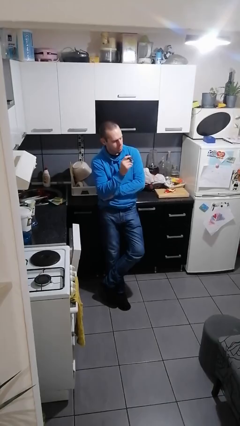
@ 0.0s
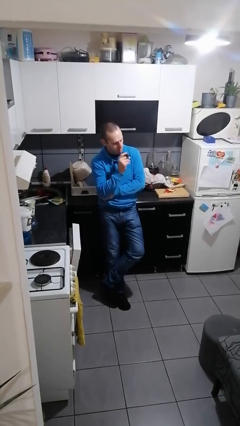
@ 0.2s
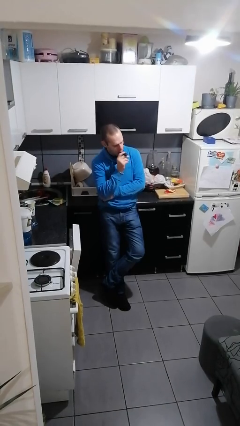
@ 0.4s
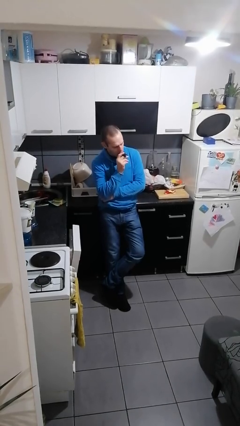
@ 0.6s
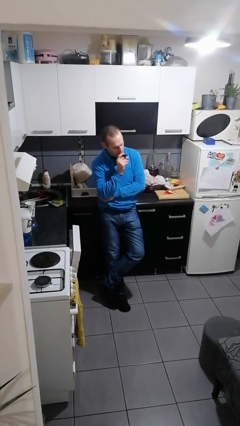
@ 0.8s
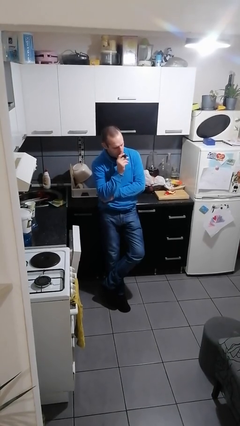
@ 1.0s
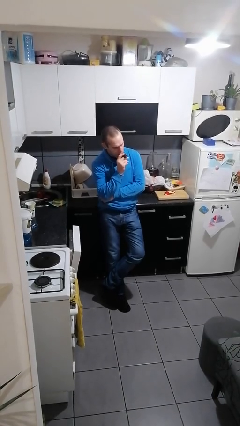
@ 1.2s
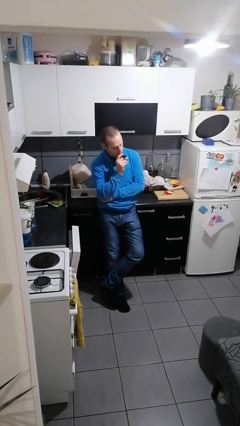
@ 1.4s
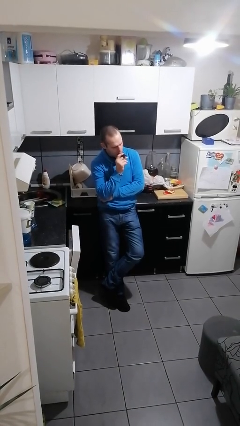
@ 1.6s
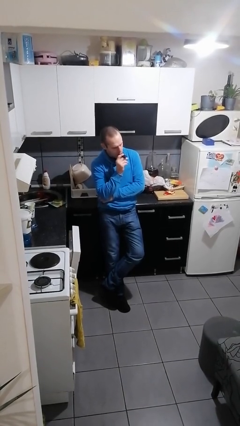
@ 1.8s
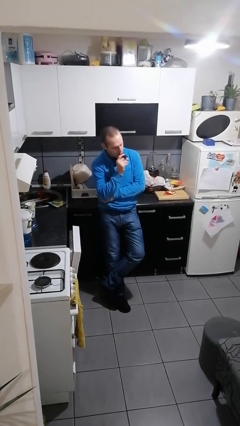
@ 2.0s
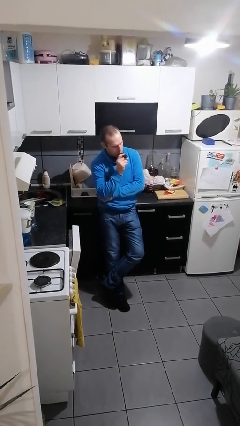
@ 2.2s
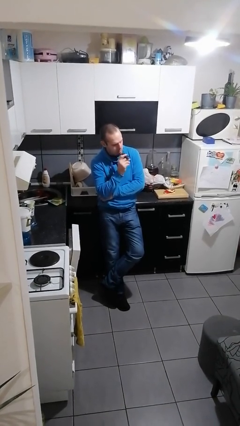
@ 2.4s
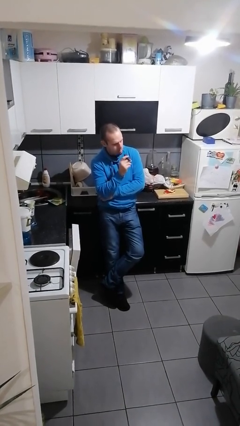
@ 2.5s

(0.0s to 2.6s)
person vapes

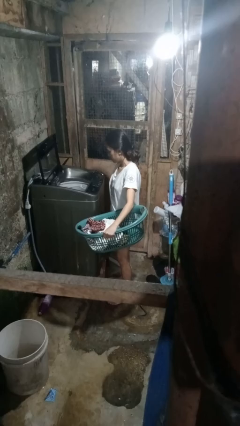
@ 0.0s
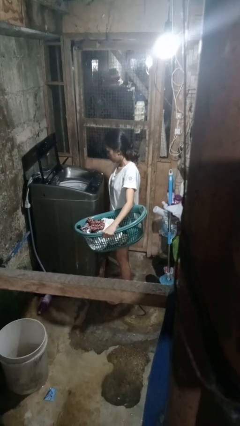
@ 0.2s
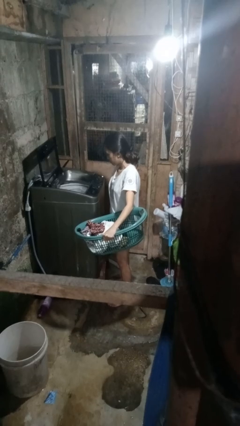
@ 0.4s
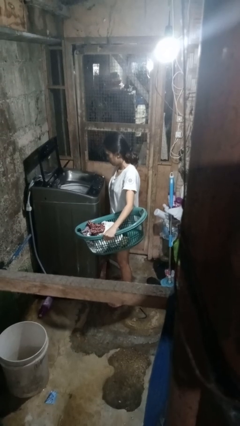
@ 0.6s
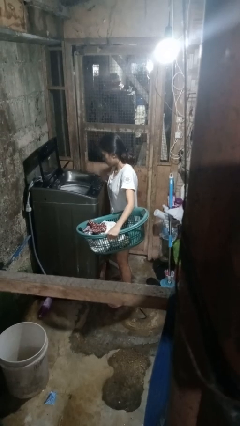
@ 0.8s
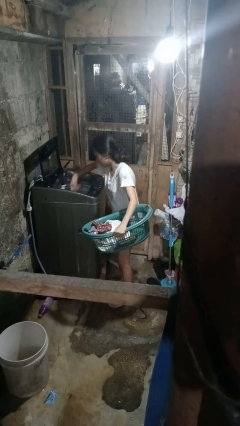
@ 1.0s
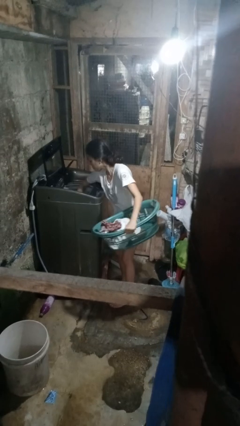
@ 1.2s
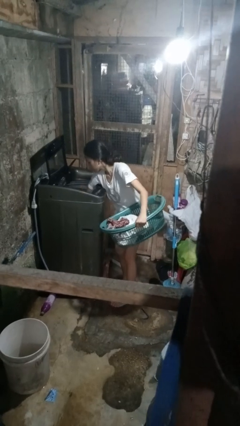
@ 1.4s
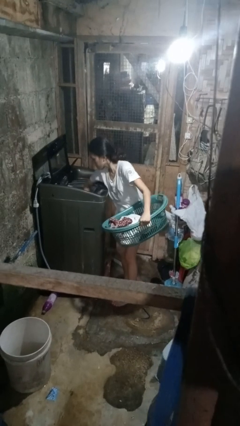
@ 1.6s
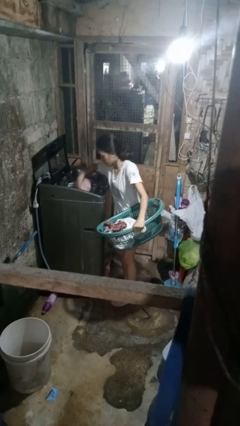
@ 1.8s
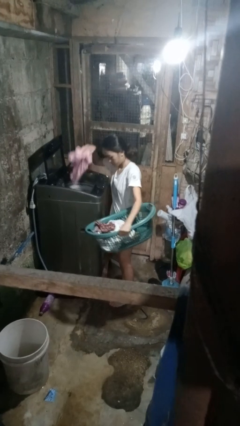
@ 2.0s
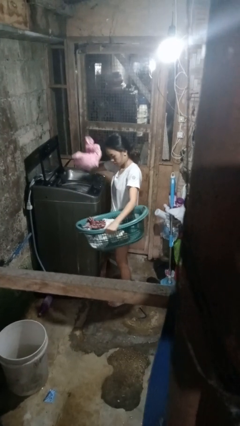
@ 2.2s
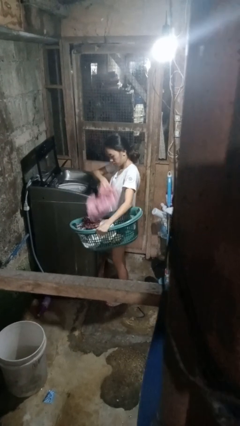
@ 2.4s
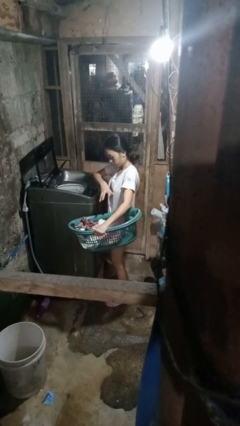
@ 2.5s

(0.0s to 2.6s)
person unloads clotheswasher

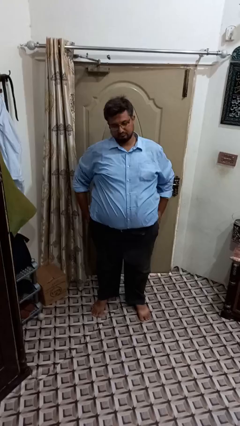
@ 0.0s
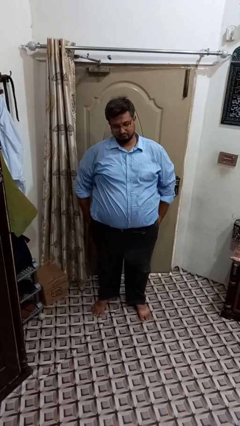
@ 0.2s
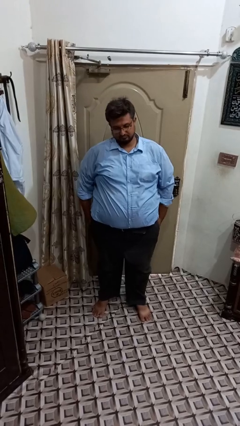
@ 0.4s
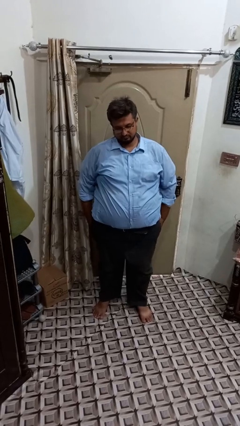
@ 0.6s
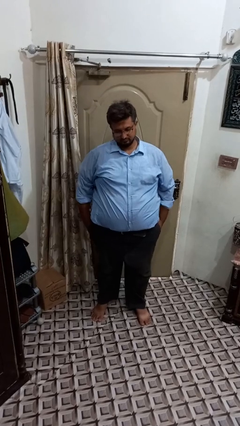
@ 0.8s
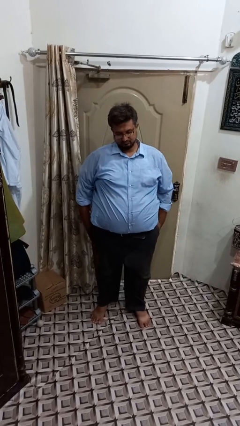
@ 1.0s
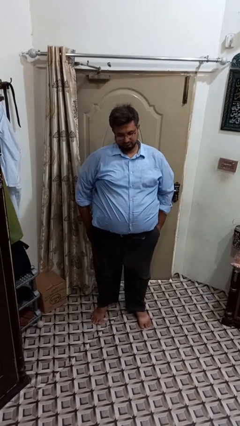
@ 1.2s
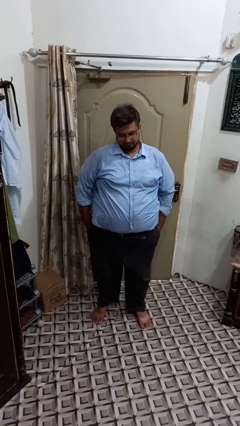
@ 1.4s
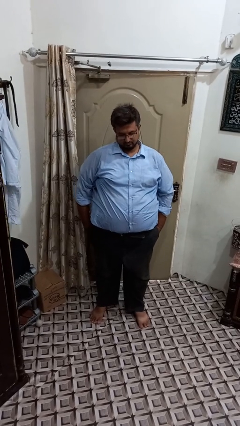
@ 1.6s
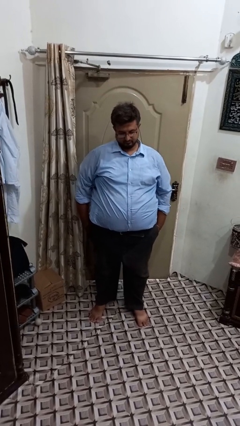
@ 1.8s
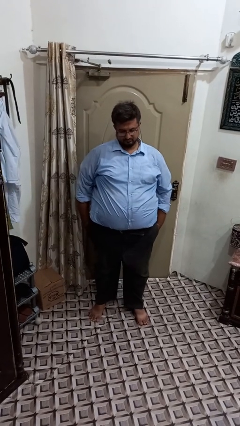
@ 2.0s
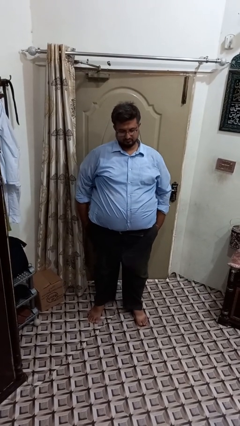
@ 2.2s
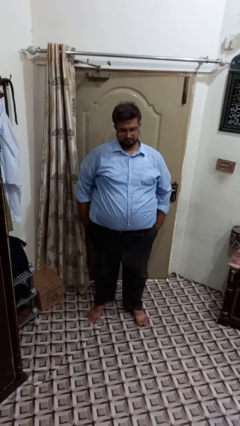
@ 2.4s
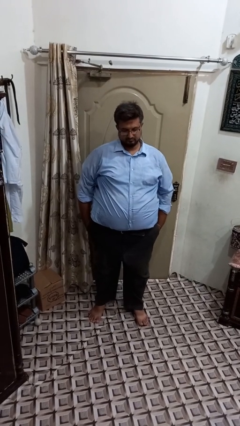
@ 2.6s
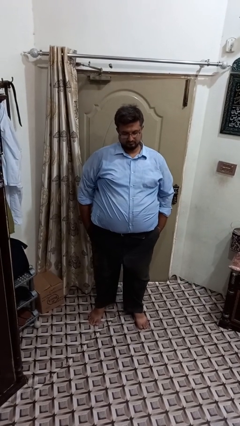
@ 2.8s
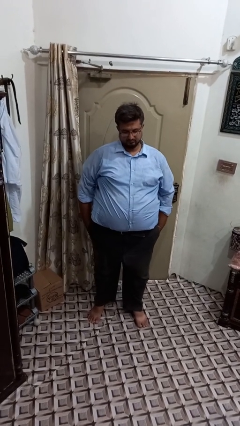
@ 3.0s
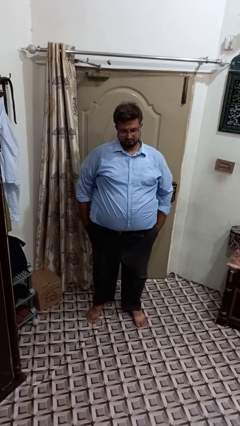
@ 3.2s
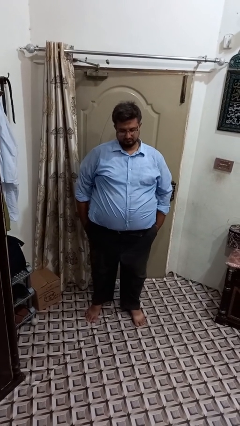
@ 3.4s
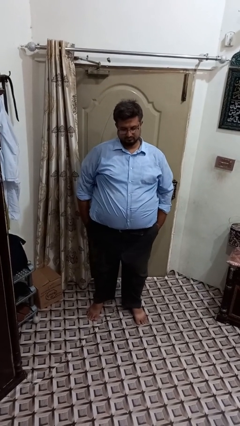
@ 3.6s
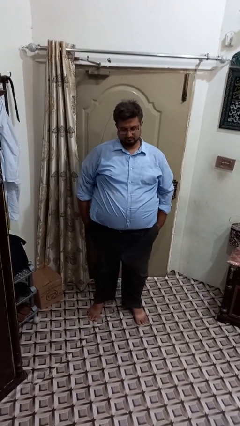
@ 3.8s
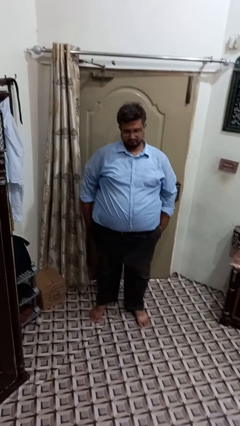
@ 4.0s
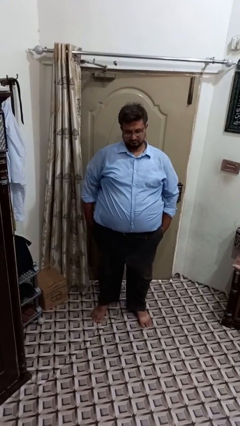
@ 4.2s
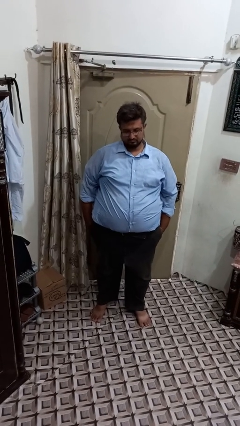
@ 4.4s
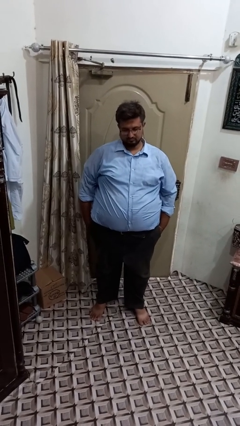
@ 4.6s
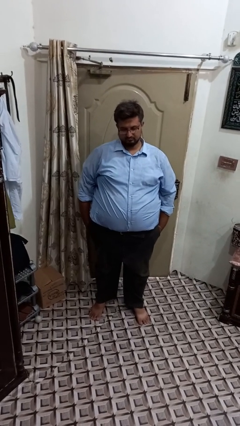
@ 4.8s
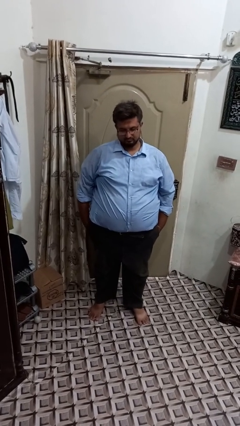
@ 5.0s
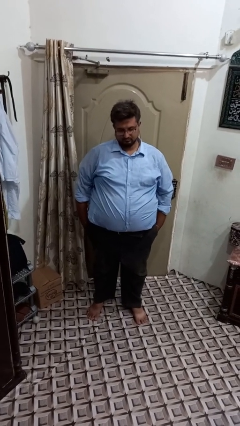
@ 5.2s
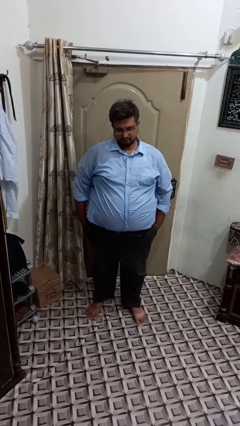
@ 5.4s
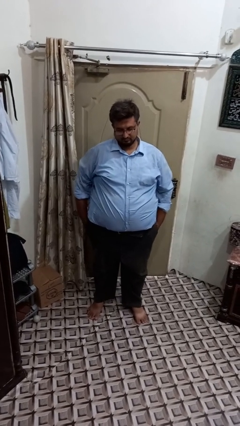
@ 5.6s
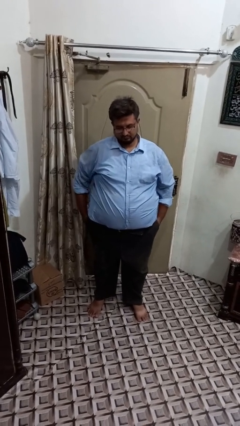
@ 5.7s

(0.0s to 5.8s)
person puts hands in back pockets

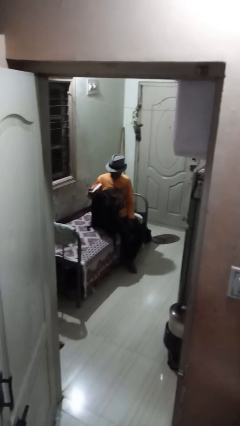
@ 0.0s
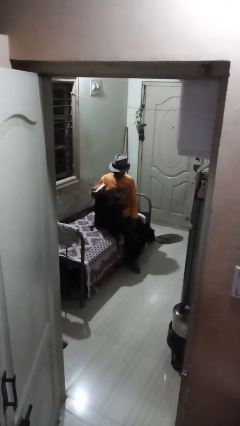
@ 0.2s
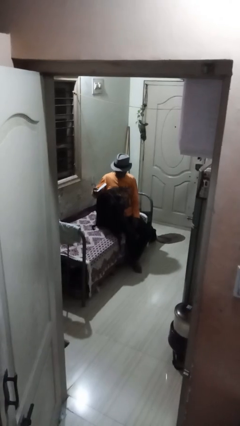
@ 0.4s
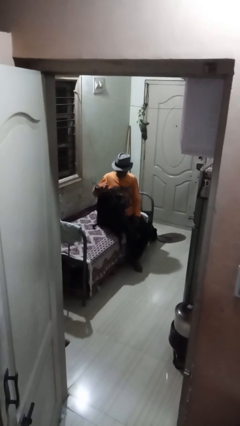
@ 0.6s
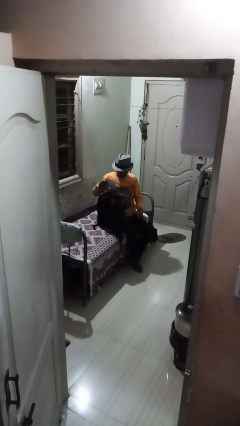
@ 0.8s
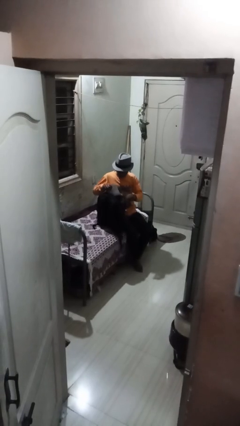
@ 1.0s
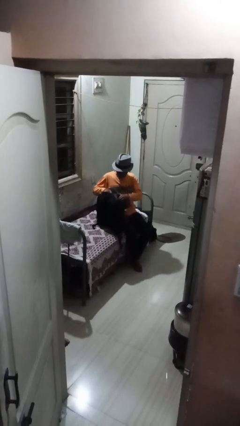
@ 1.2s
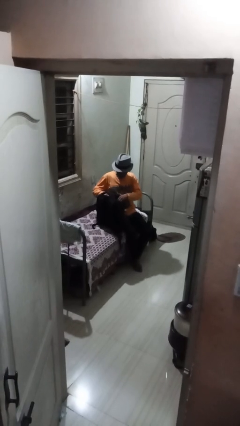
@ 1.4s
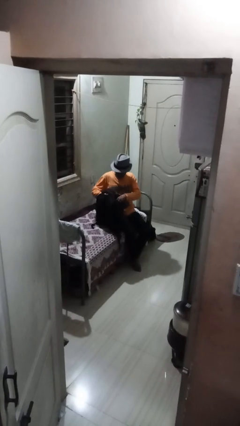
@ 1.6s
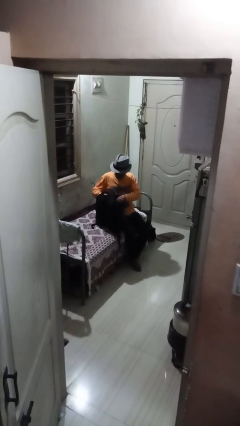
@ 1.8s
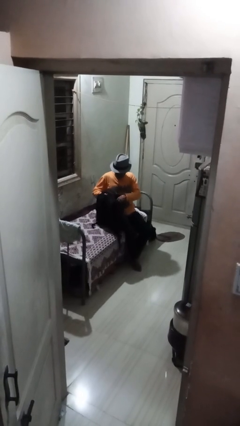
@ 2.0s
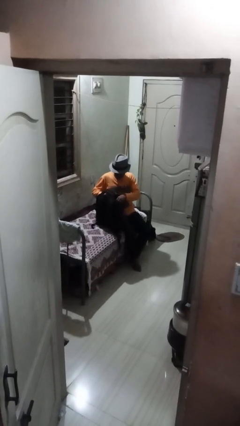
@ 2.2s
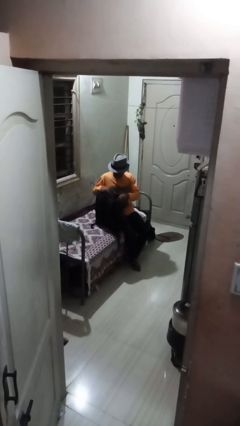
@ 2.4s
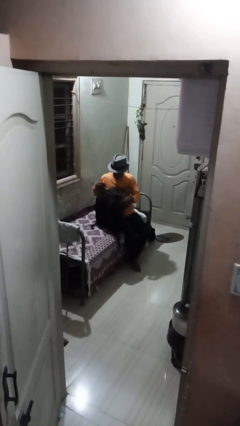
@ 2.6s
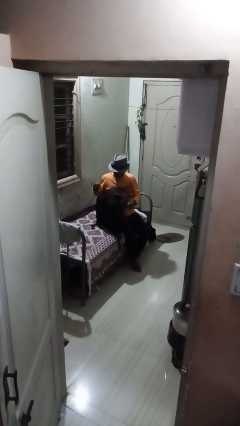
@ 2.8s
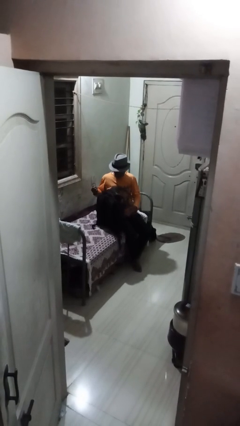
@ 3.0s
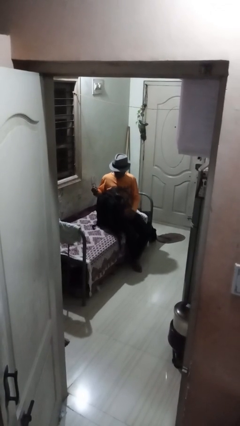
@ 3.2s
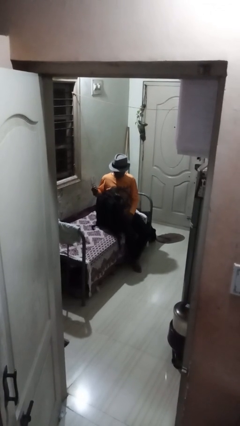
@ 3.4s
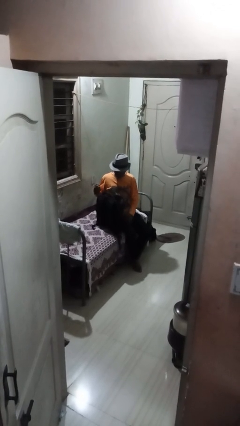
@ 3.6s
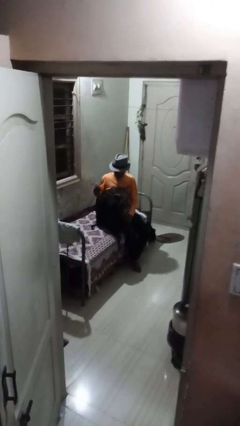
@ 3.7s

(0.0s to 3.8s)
person puts object into backpack

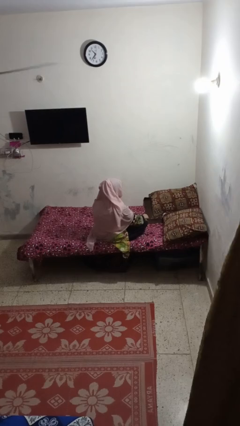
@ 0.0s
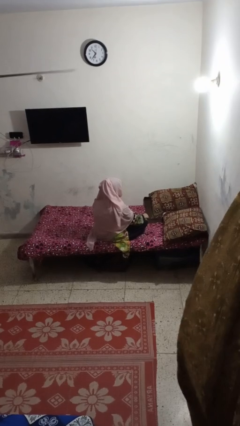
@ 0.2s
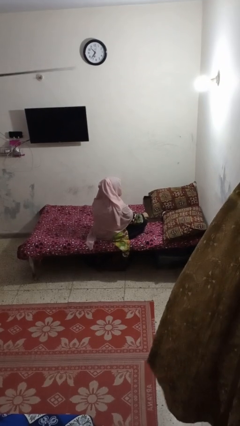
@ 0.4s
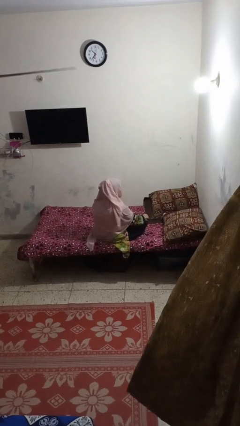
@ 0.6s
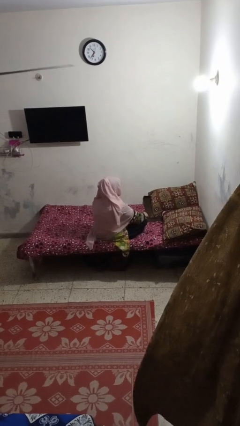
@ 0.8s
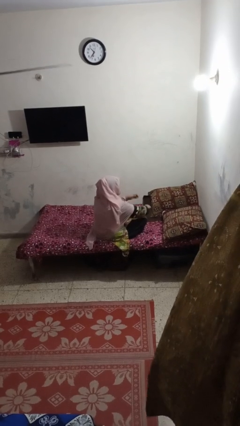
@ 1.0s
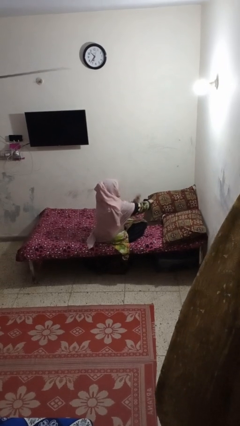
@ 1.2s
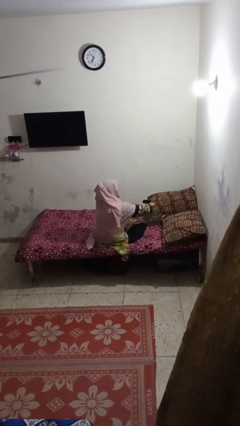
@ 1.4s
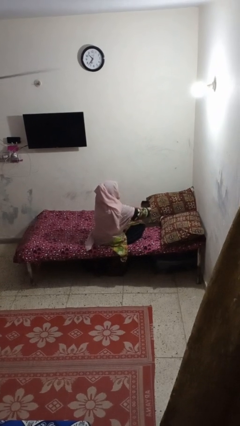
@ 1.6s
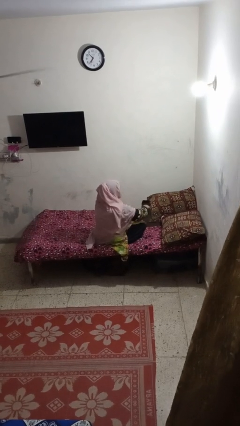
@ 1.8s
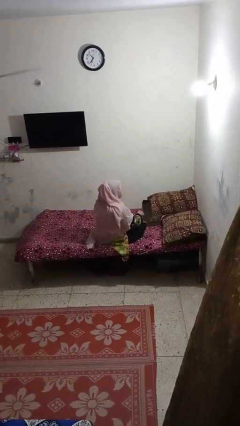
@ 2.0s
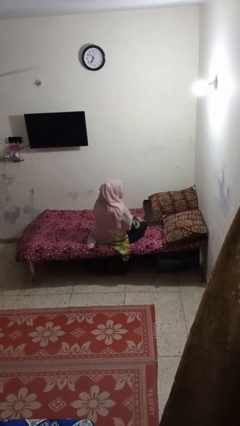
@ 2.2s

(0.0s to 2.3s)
person swats bug

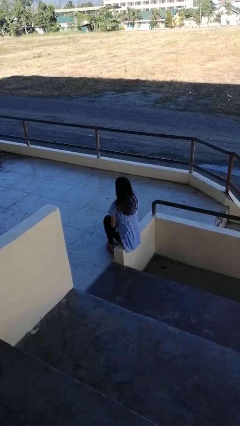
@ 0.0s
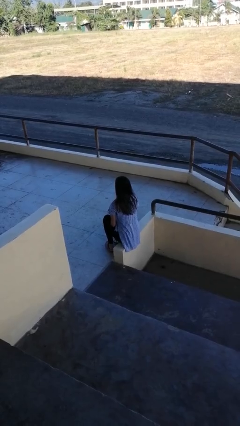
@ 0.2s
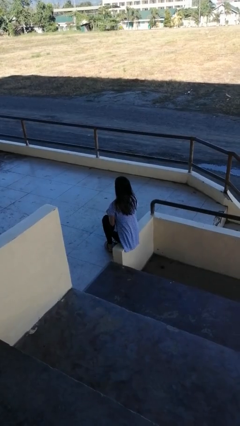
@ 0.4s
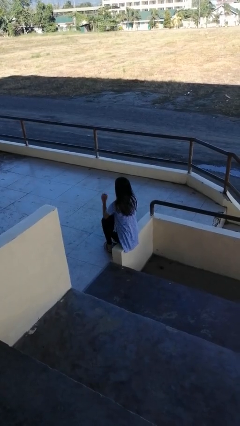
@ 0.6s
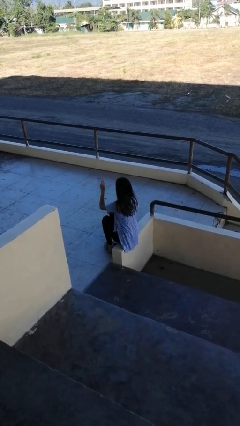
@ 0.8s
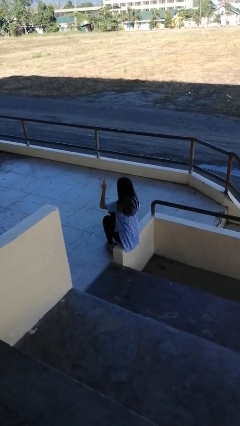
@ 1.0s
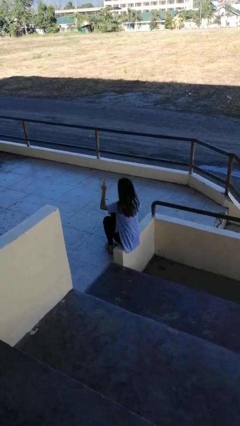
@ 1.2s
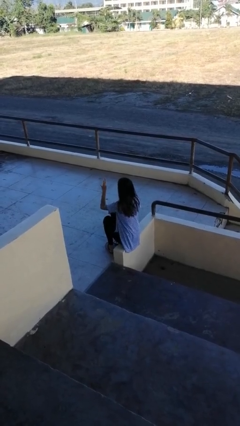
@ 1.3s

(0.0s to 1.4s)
person gestures number three
